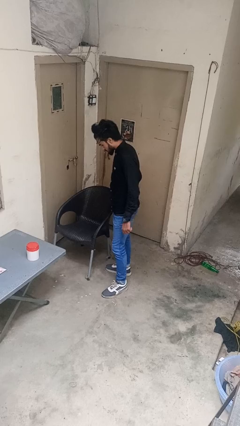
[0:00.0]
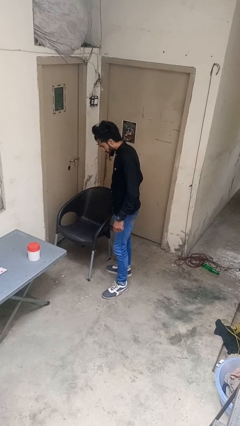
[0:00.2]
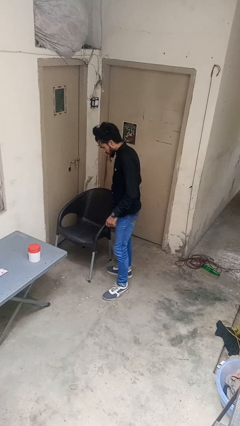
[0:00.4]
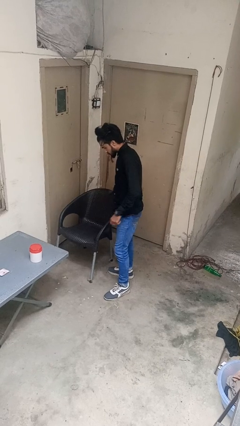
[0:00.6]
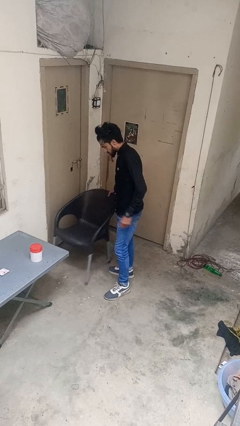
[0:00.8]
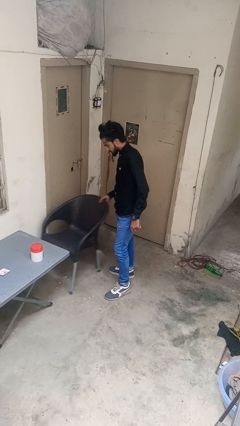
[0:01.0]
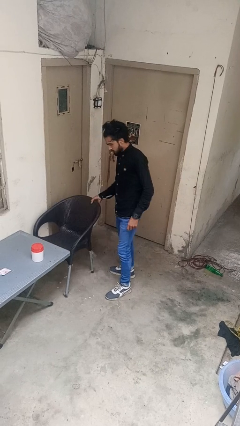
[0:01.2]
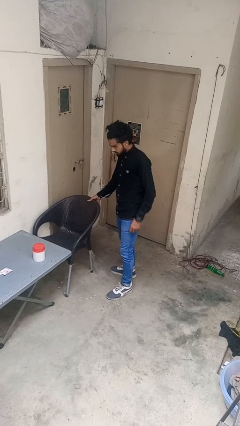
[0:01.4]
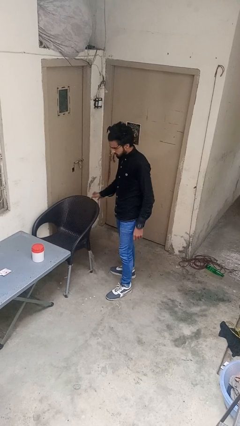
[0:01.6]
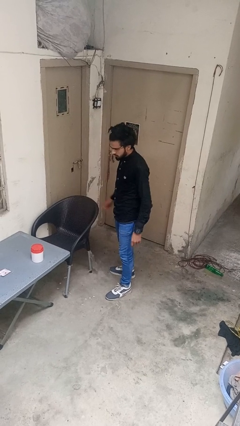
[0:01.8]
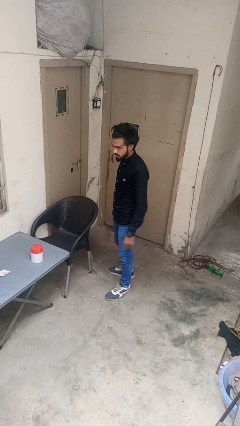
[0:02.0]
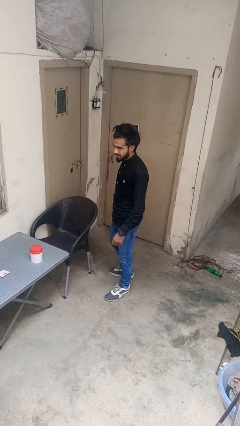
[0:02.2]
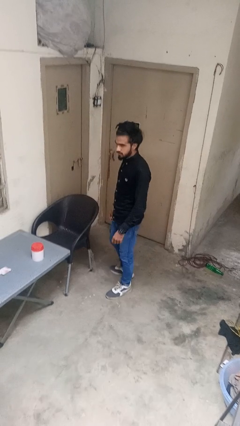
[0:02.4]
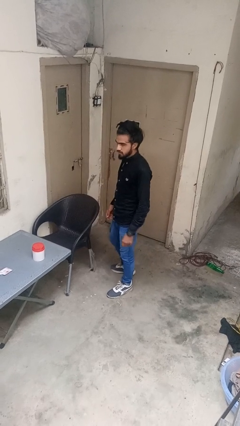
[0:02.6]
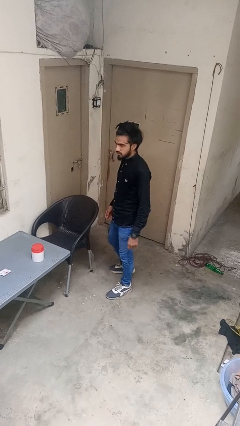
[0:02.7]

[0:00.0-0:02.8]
person pushes in chair

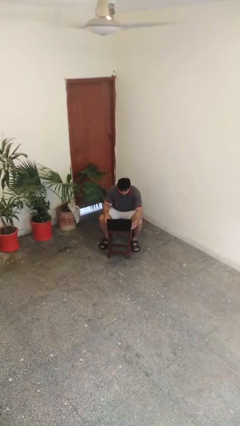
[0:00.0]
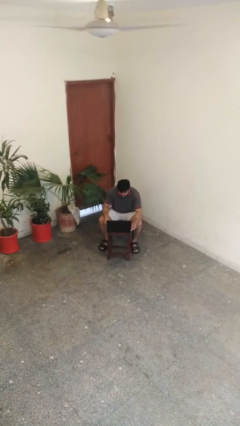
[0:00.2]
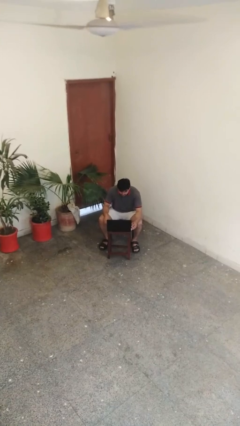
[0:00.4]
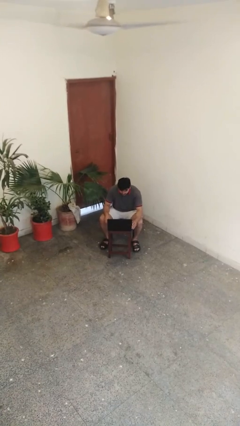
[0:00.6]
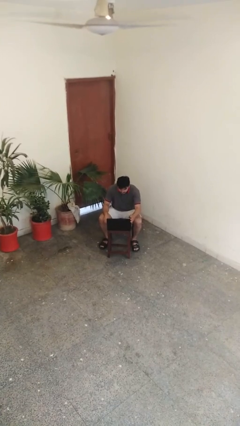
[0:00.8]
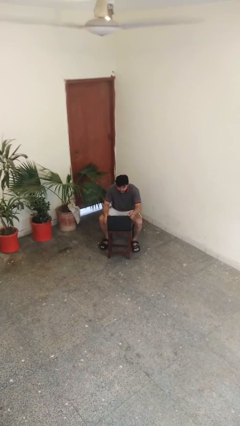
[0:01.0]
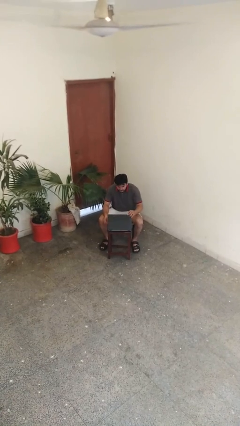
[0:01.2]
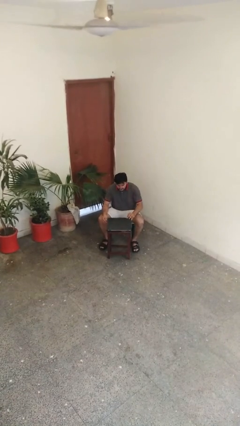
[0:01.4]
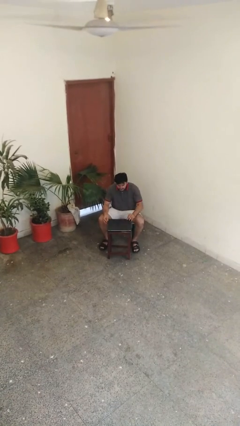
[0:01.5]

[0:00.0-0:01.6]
person closes laptop

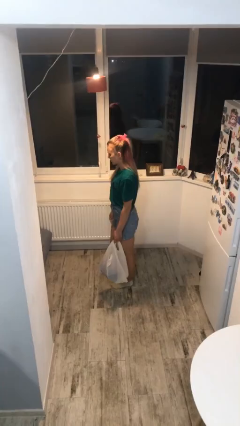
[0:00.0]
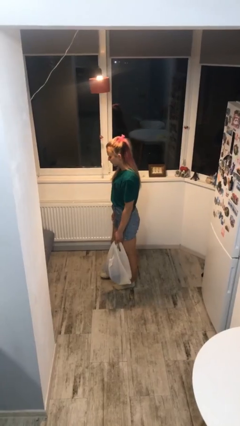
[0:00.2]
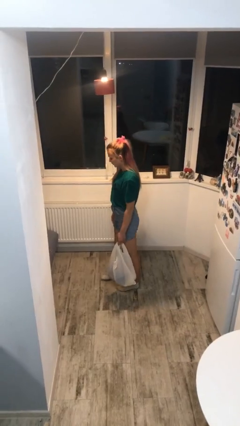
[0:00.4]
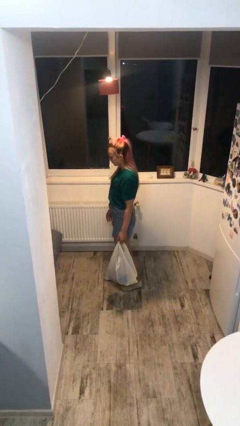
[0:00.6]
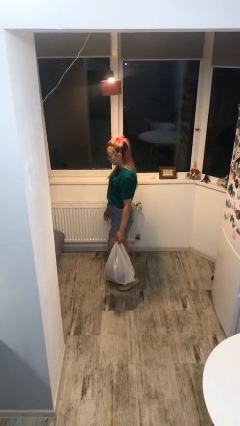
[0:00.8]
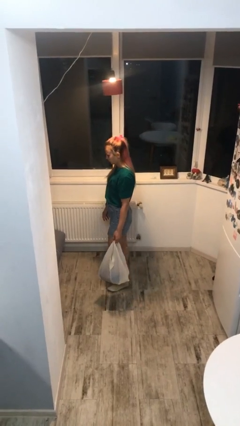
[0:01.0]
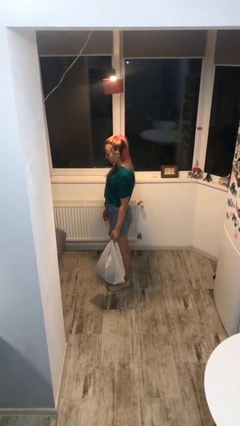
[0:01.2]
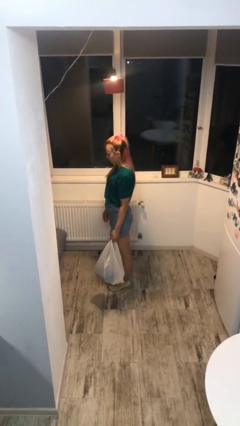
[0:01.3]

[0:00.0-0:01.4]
person carries groceries

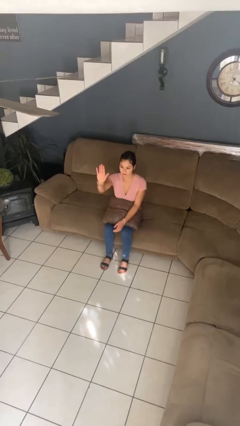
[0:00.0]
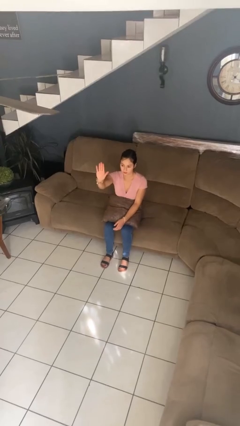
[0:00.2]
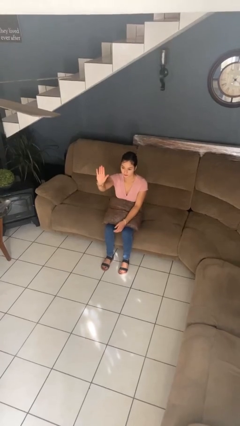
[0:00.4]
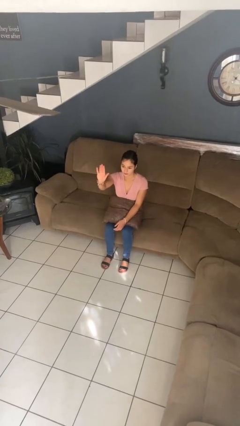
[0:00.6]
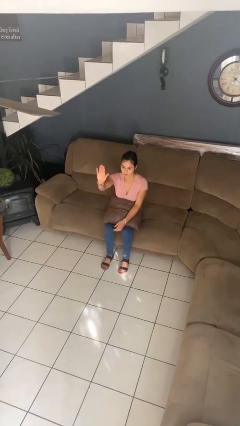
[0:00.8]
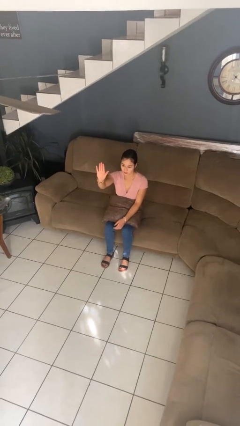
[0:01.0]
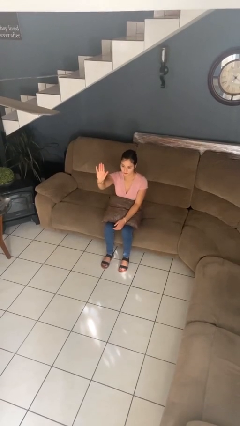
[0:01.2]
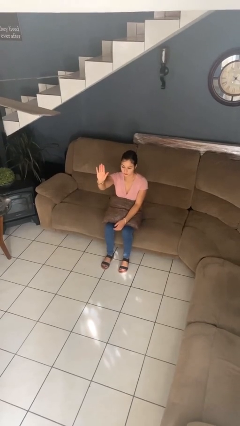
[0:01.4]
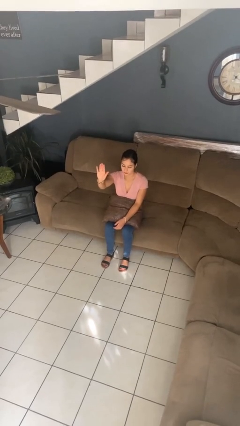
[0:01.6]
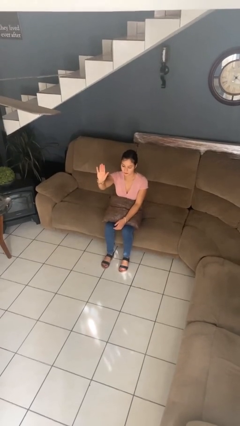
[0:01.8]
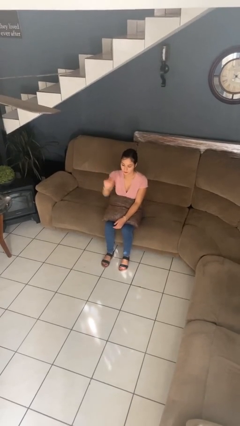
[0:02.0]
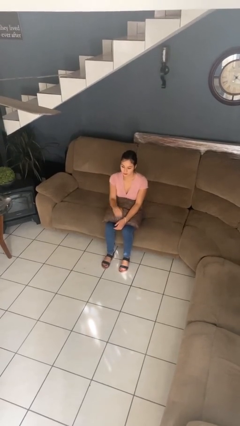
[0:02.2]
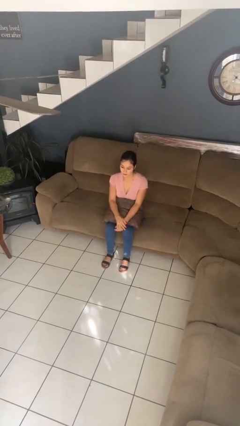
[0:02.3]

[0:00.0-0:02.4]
person gestures stop

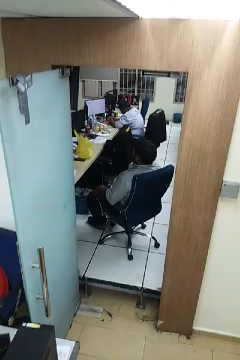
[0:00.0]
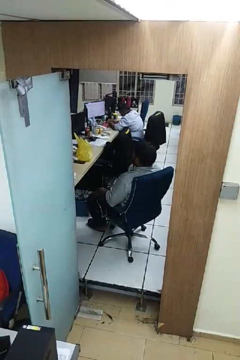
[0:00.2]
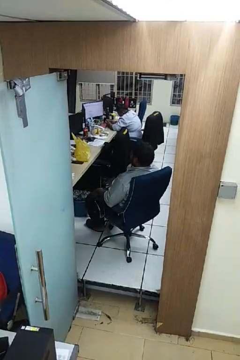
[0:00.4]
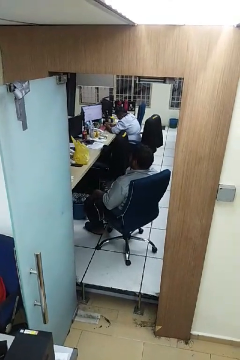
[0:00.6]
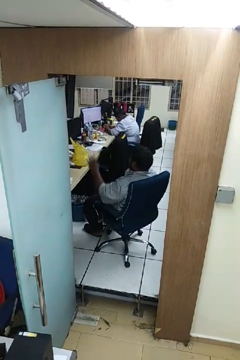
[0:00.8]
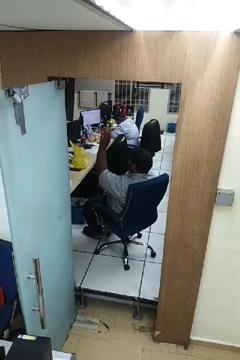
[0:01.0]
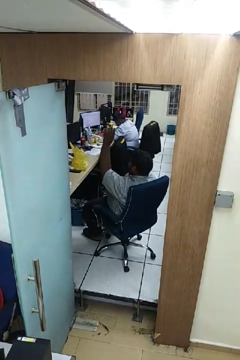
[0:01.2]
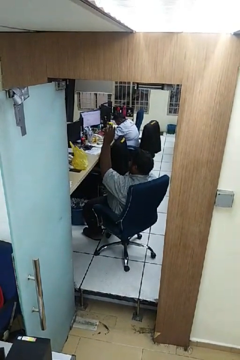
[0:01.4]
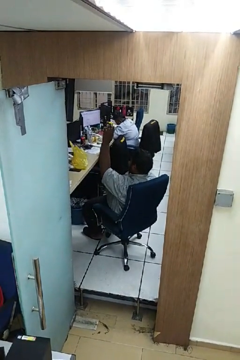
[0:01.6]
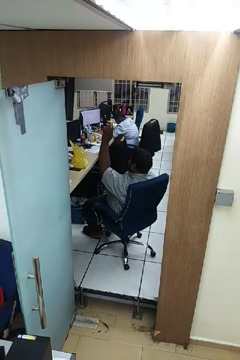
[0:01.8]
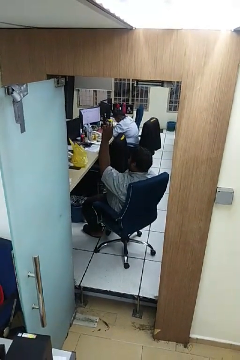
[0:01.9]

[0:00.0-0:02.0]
person gestures raise hand

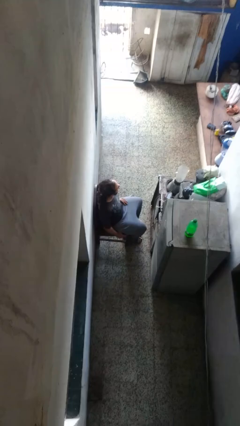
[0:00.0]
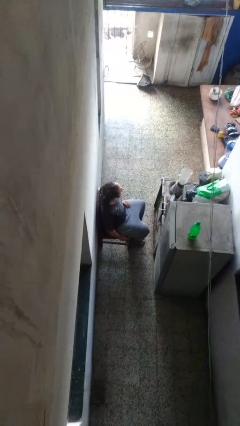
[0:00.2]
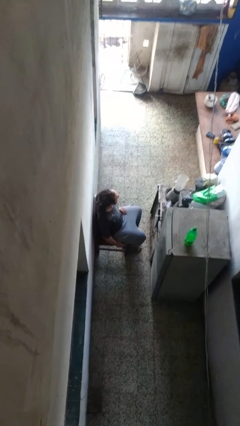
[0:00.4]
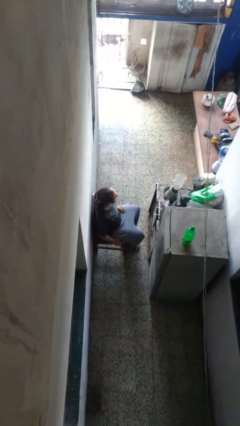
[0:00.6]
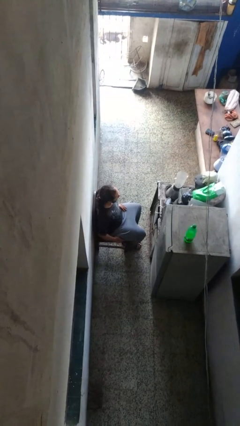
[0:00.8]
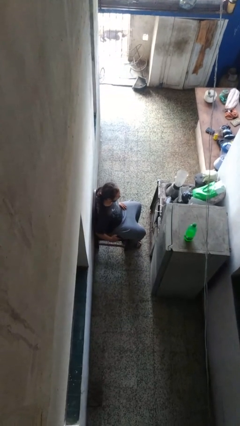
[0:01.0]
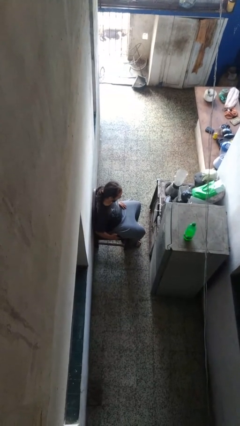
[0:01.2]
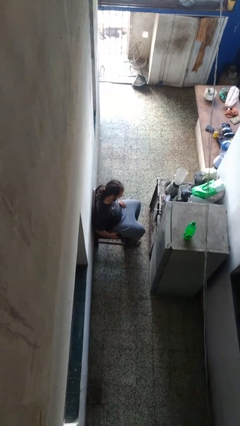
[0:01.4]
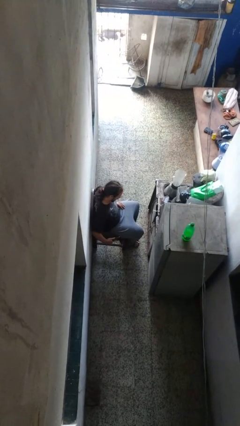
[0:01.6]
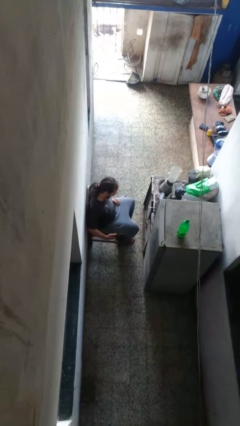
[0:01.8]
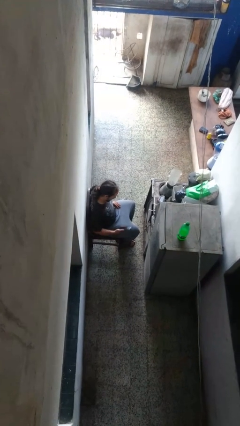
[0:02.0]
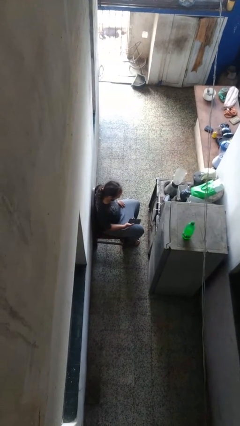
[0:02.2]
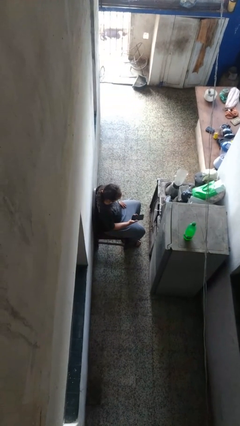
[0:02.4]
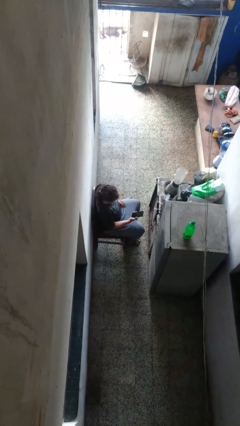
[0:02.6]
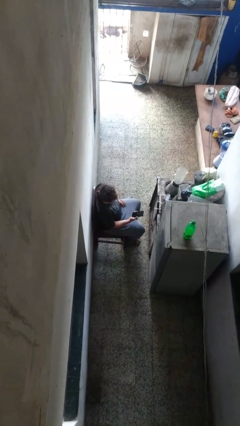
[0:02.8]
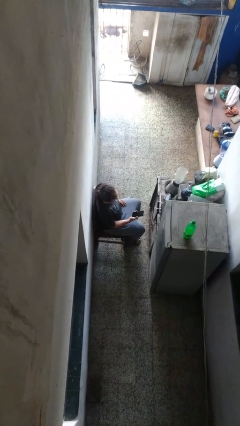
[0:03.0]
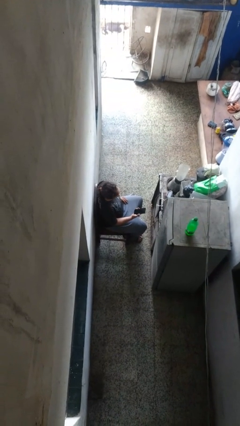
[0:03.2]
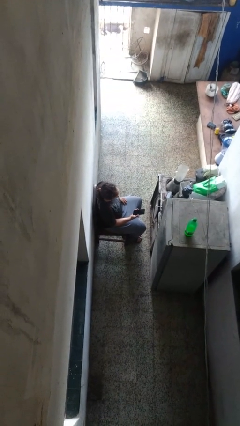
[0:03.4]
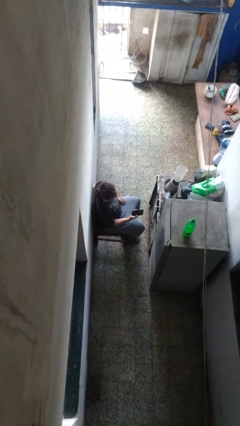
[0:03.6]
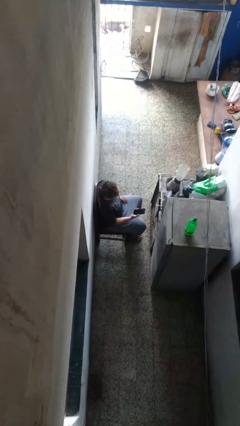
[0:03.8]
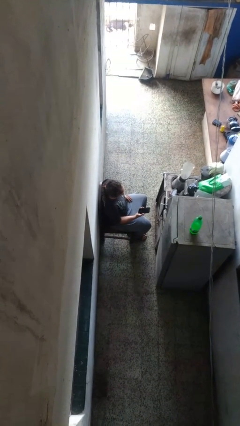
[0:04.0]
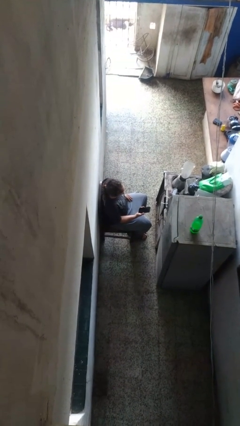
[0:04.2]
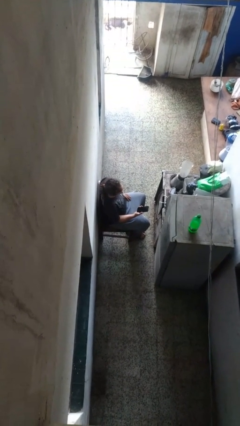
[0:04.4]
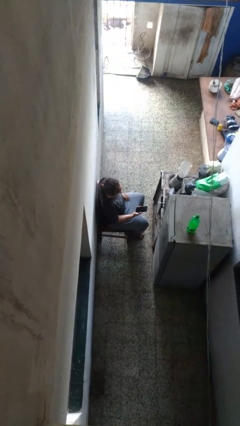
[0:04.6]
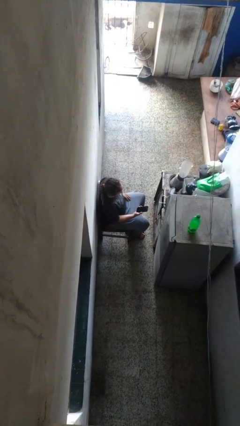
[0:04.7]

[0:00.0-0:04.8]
person takes phone from pocket

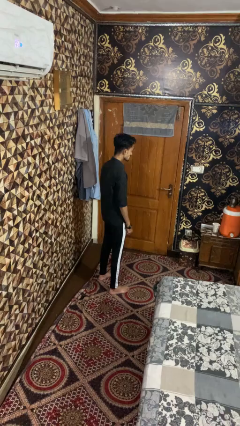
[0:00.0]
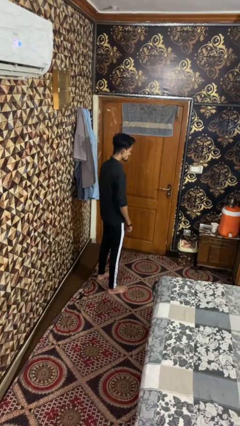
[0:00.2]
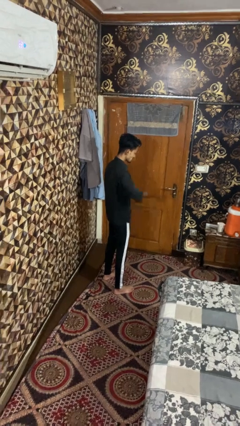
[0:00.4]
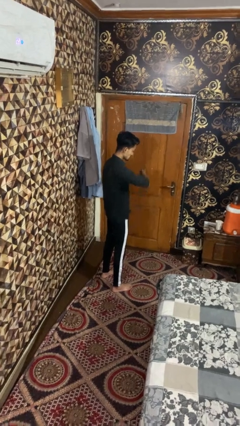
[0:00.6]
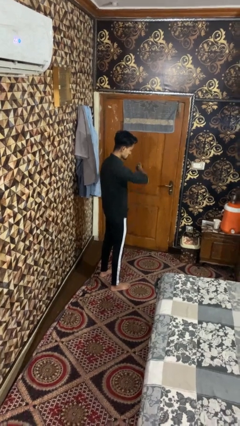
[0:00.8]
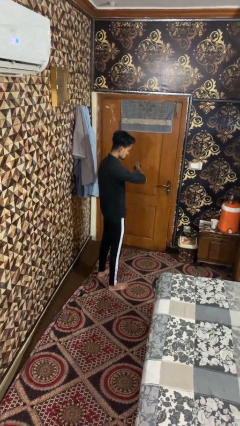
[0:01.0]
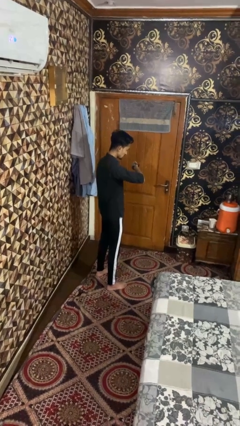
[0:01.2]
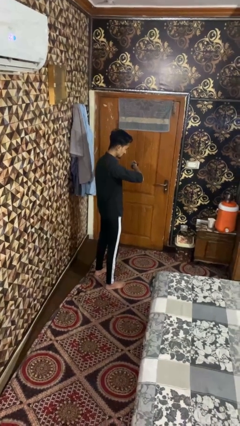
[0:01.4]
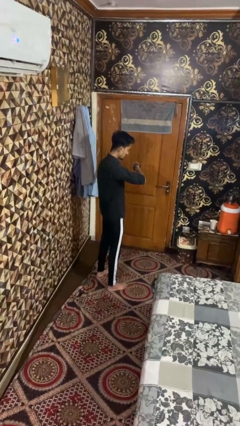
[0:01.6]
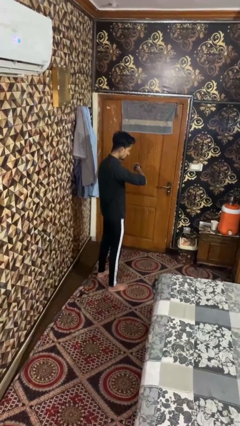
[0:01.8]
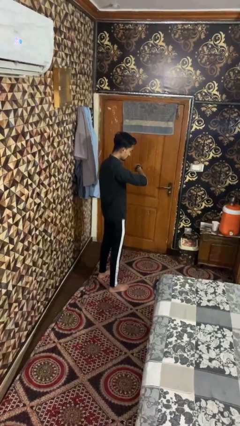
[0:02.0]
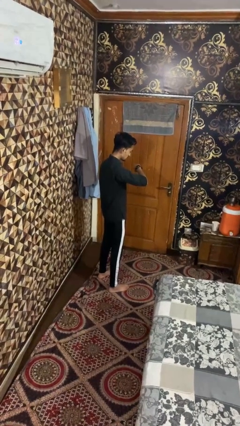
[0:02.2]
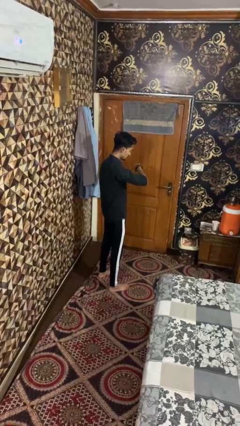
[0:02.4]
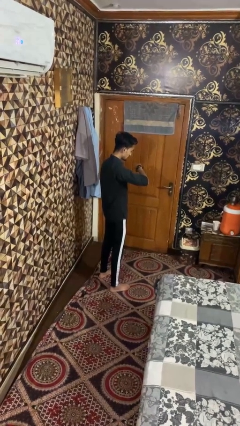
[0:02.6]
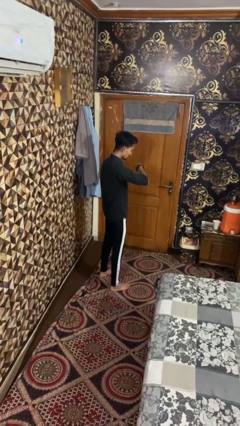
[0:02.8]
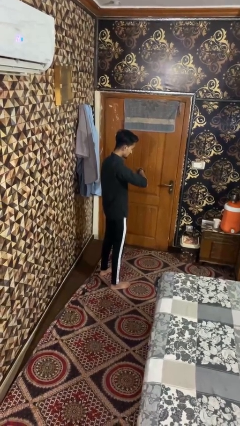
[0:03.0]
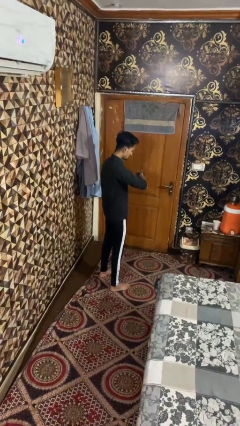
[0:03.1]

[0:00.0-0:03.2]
person looks at wristwatch
